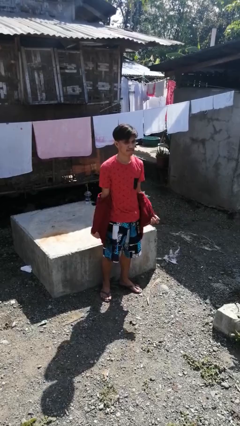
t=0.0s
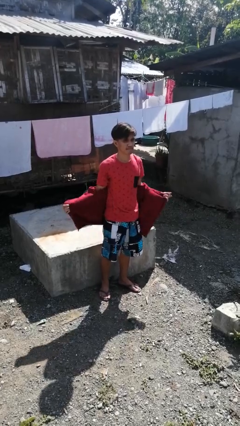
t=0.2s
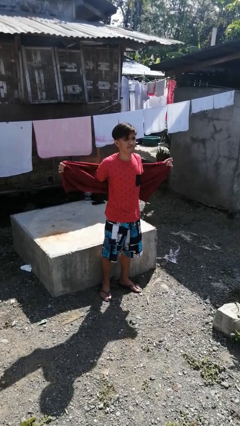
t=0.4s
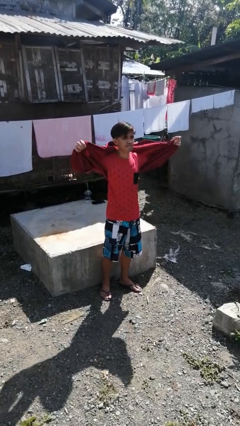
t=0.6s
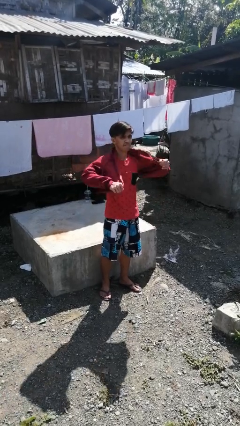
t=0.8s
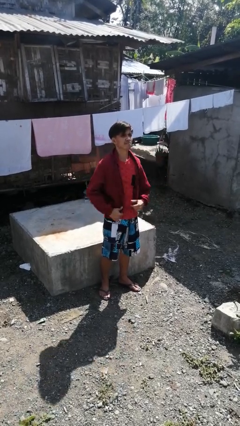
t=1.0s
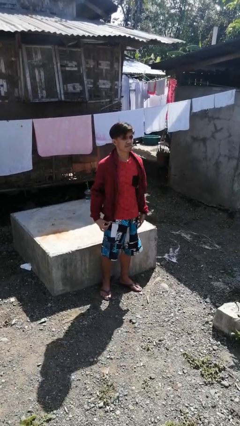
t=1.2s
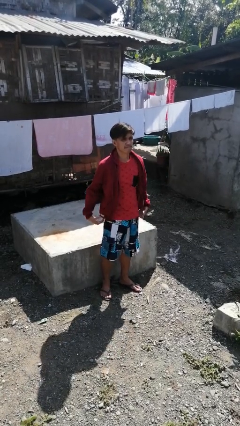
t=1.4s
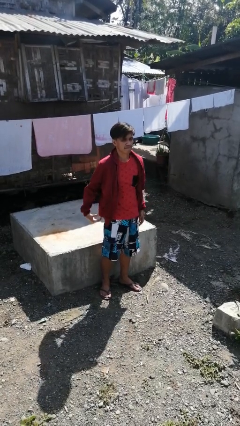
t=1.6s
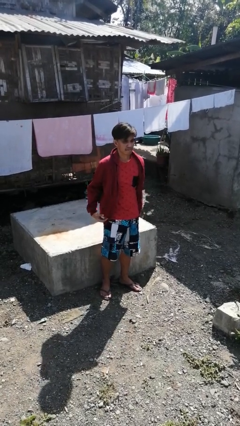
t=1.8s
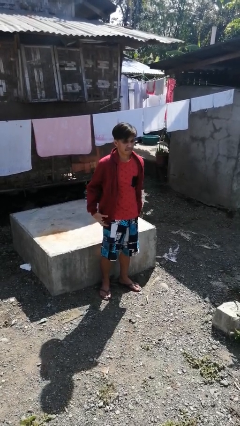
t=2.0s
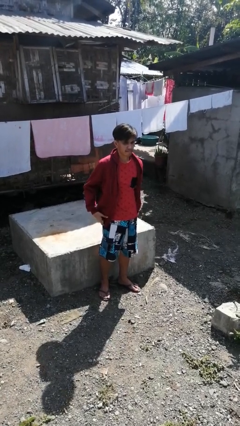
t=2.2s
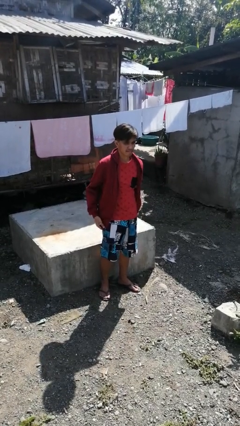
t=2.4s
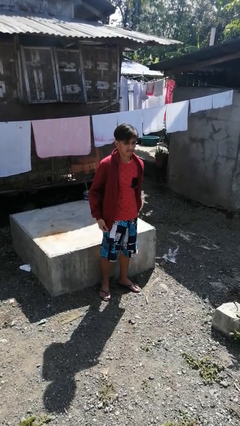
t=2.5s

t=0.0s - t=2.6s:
person puts on jacket

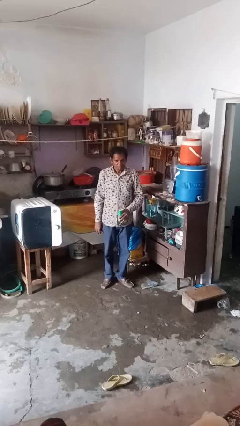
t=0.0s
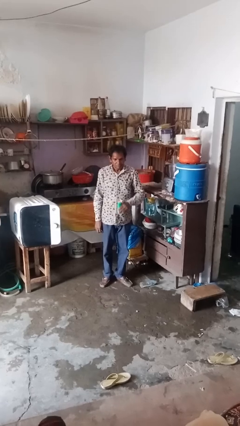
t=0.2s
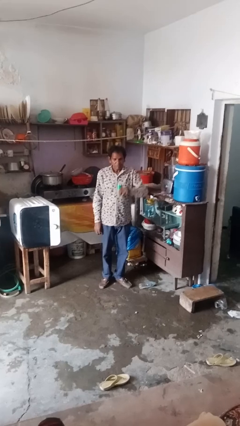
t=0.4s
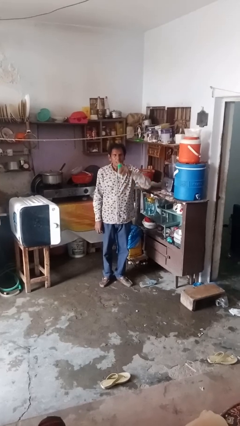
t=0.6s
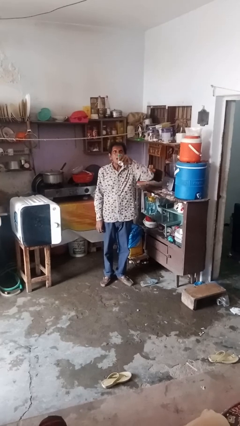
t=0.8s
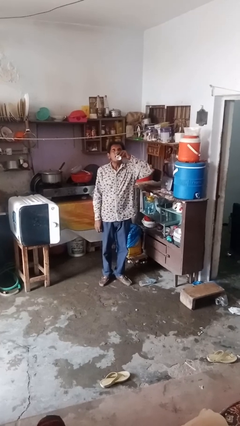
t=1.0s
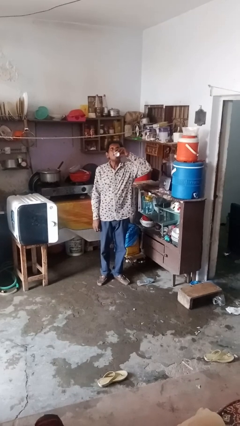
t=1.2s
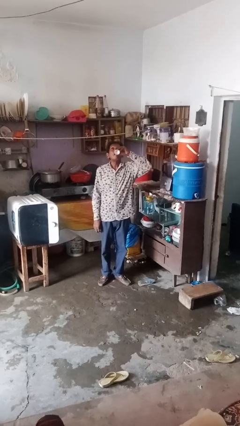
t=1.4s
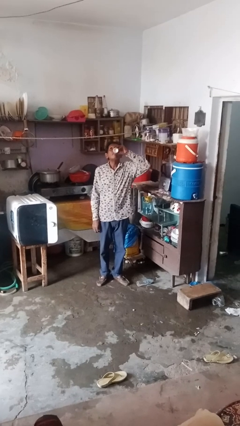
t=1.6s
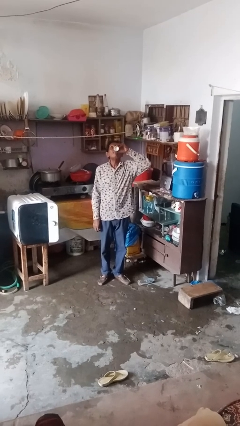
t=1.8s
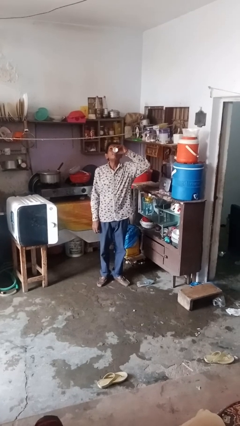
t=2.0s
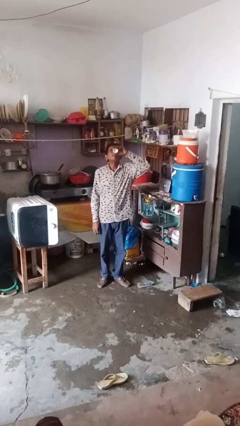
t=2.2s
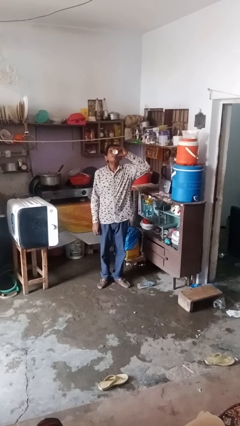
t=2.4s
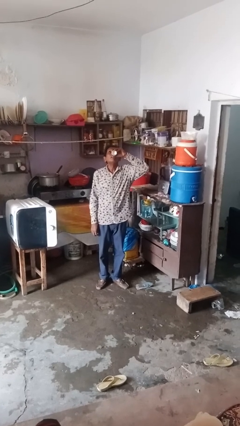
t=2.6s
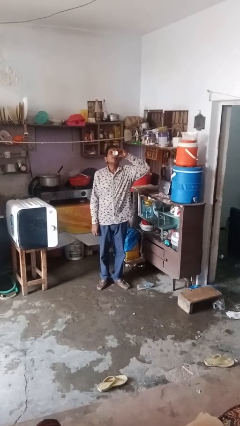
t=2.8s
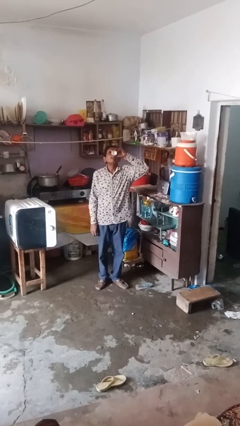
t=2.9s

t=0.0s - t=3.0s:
person drinks from beverage can

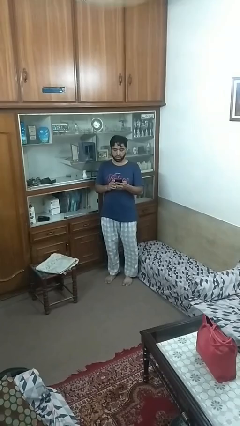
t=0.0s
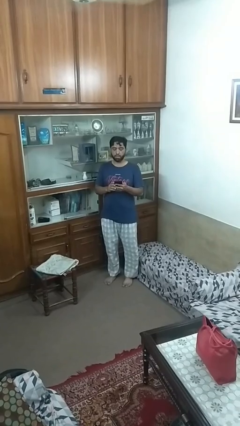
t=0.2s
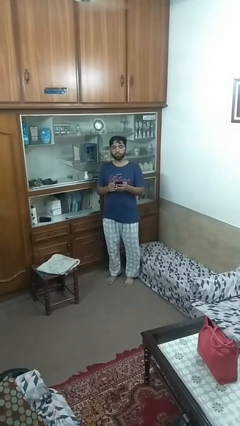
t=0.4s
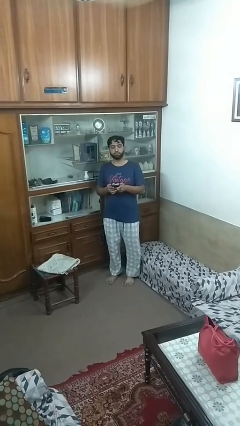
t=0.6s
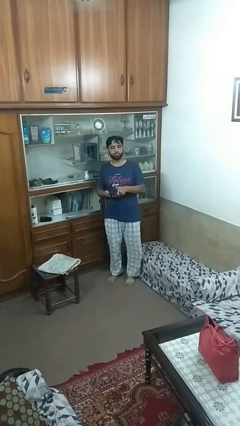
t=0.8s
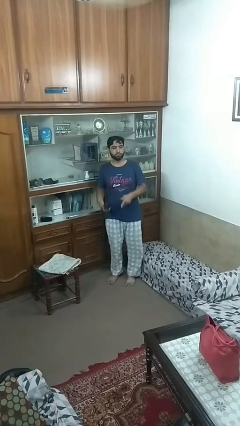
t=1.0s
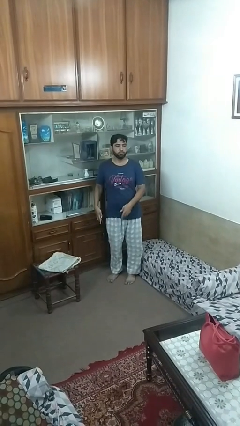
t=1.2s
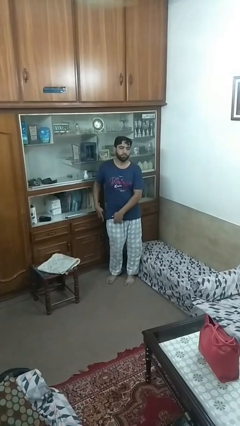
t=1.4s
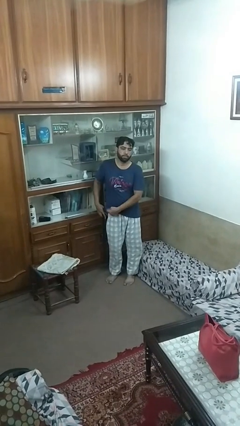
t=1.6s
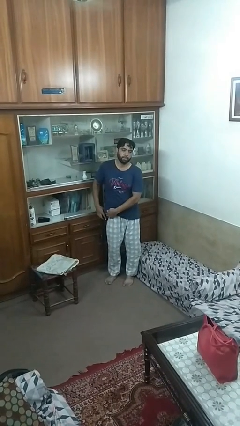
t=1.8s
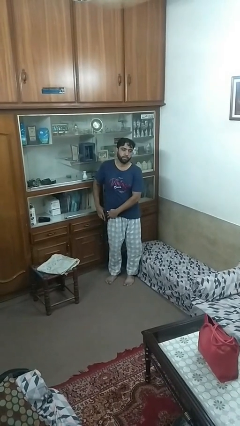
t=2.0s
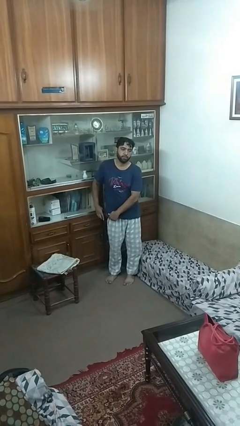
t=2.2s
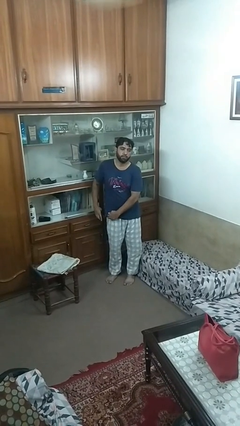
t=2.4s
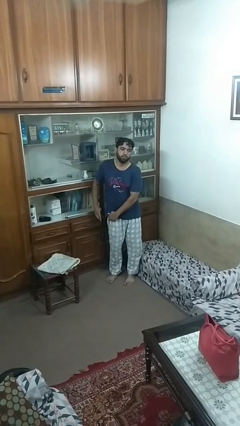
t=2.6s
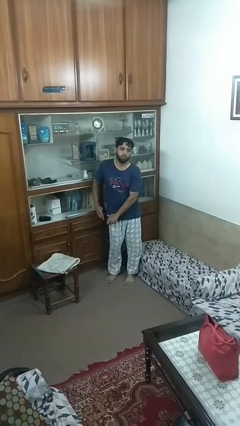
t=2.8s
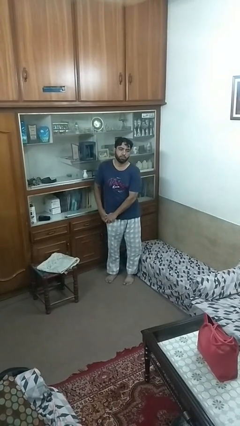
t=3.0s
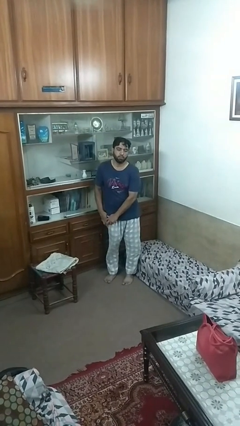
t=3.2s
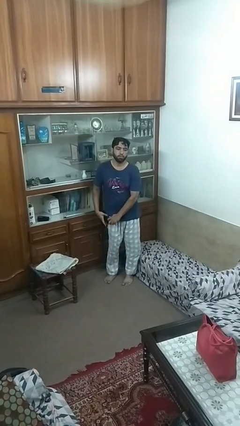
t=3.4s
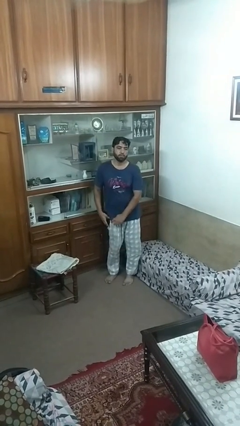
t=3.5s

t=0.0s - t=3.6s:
person puts phone into pocket

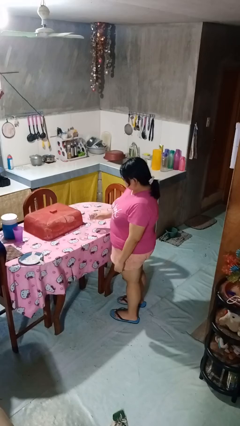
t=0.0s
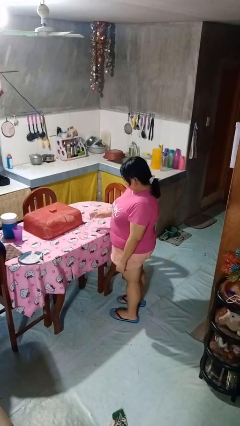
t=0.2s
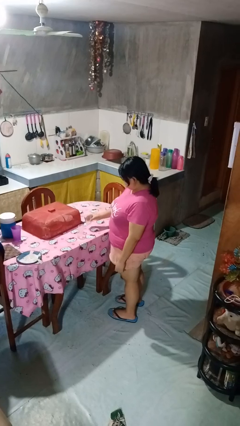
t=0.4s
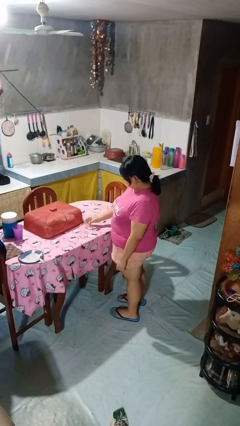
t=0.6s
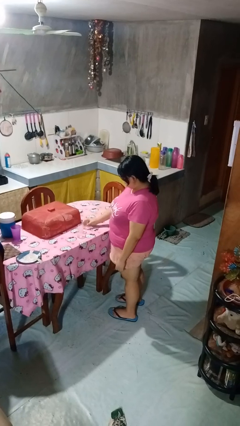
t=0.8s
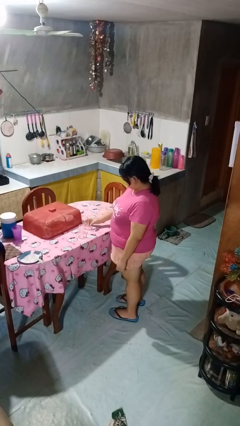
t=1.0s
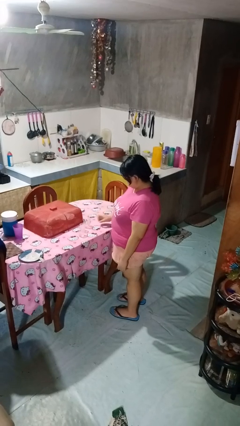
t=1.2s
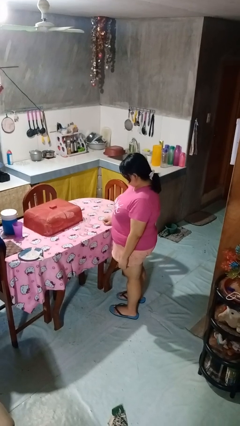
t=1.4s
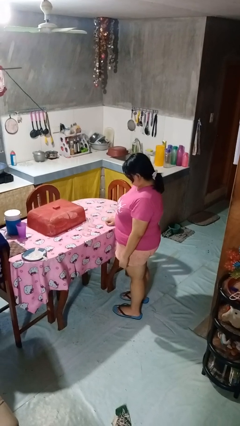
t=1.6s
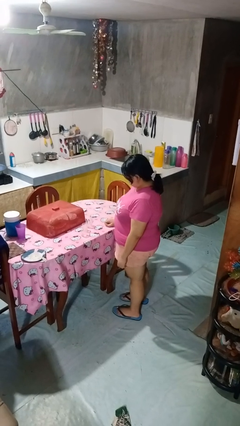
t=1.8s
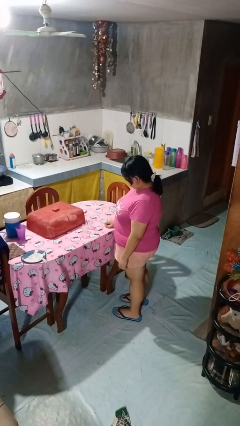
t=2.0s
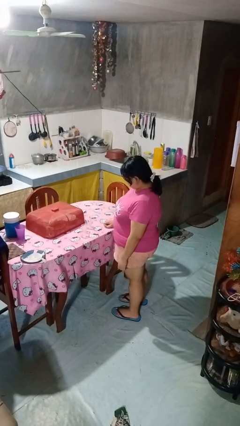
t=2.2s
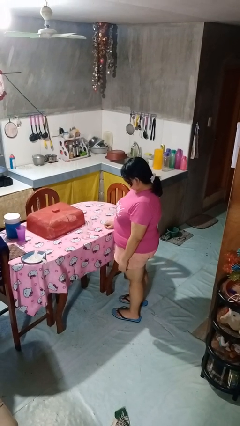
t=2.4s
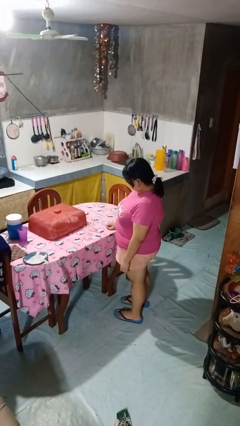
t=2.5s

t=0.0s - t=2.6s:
person puts down object on table

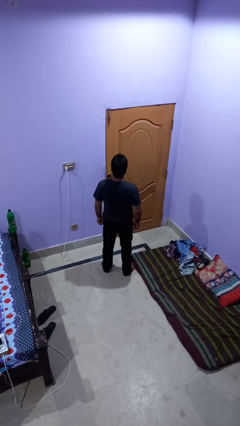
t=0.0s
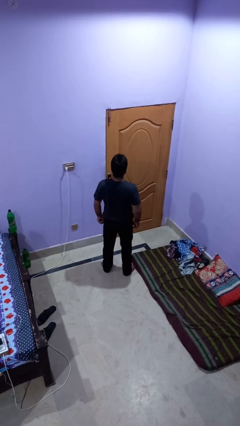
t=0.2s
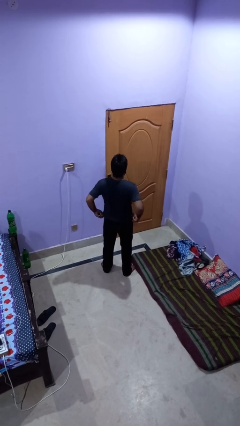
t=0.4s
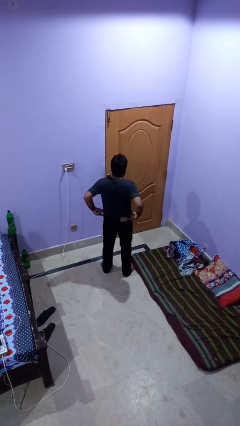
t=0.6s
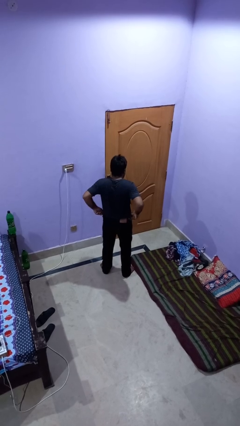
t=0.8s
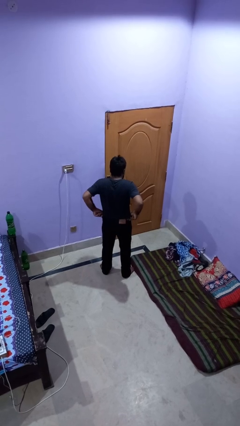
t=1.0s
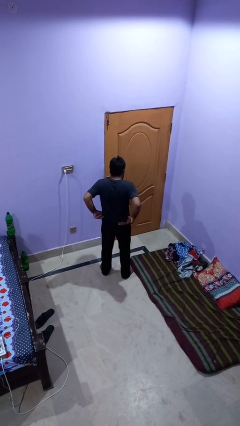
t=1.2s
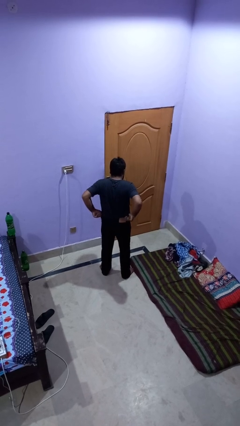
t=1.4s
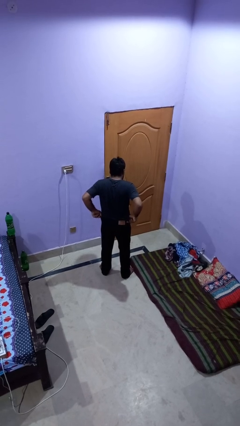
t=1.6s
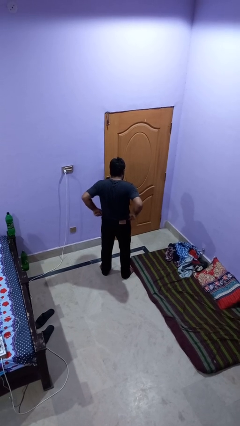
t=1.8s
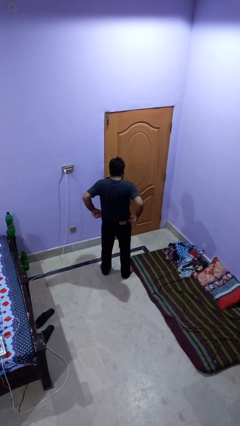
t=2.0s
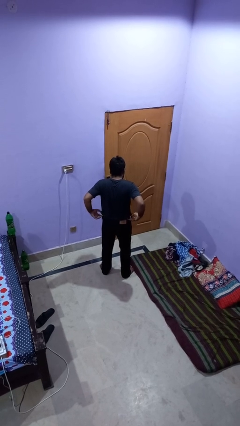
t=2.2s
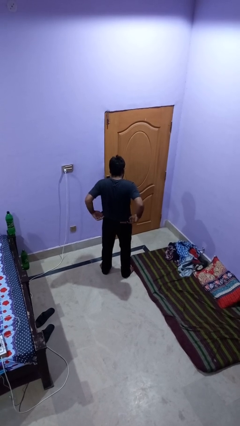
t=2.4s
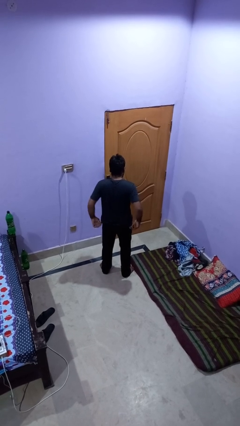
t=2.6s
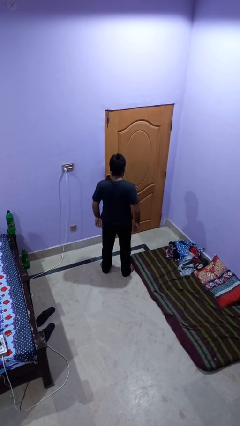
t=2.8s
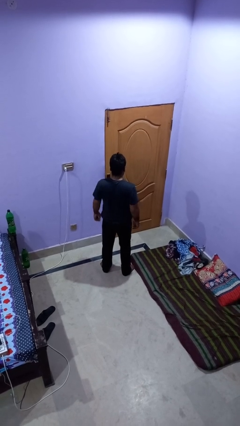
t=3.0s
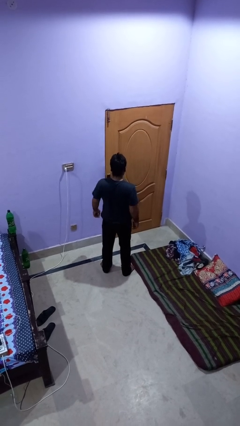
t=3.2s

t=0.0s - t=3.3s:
person hikes up pants

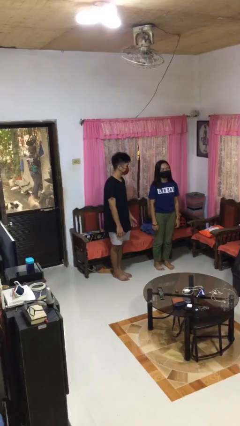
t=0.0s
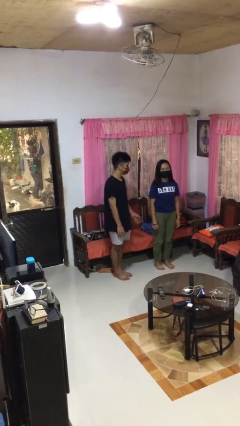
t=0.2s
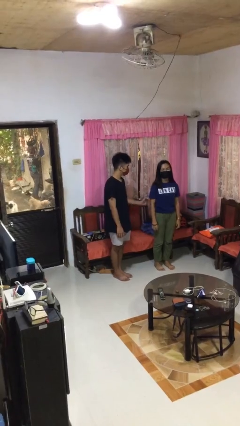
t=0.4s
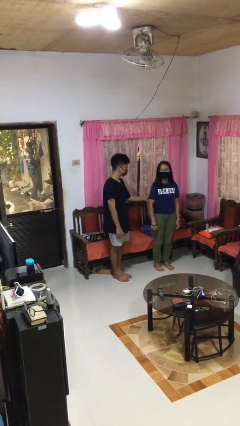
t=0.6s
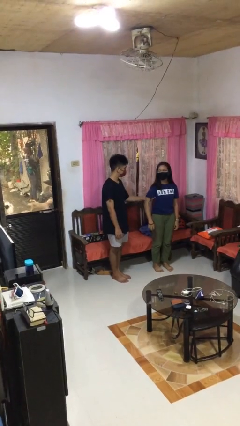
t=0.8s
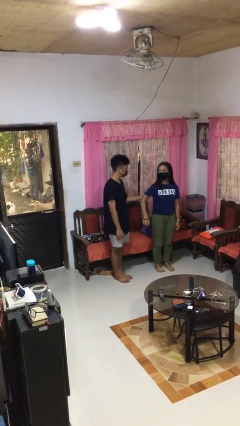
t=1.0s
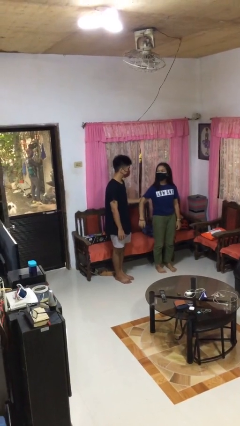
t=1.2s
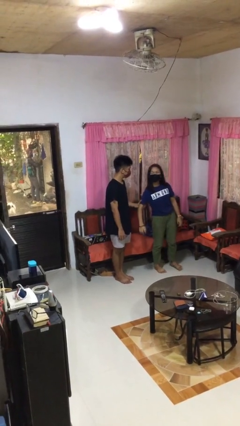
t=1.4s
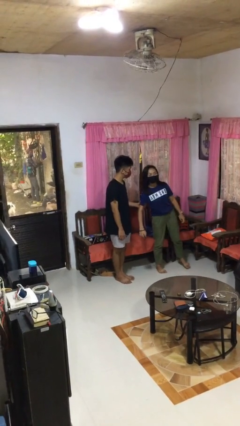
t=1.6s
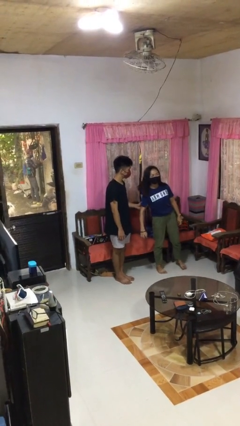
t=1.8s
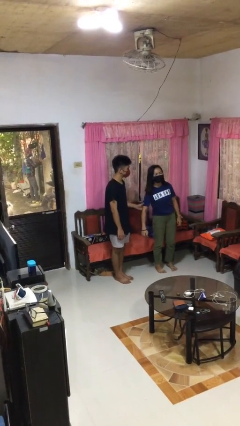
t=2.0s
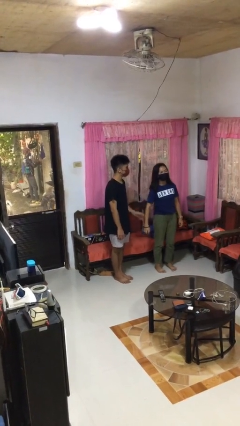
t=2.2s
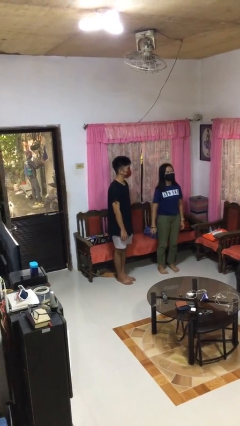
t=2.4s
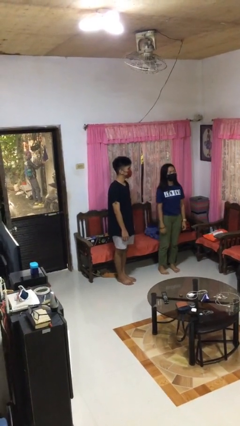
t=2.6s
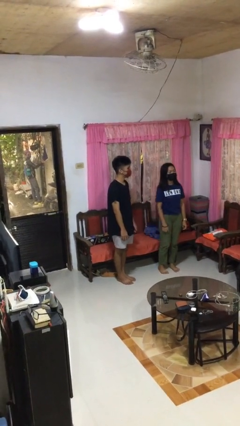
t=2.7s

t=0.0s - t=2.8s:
person grabs person by bicep
